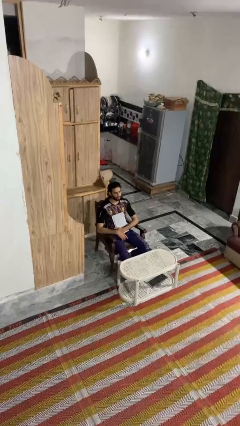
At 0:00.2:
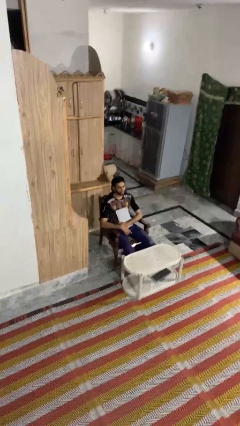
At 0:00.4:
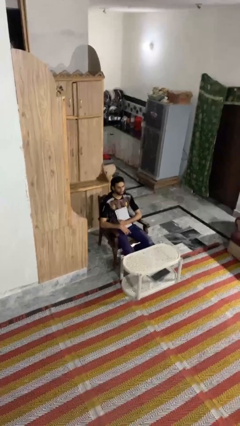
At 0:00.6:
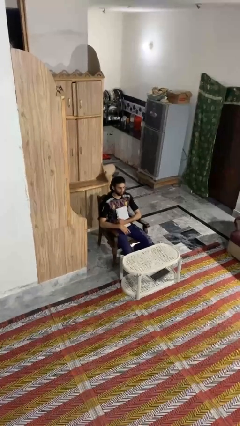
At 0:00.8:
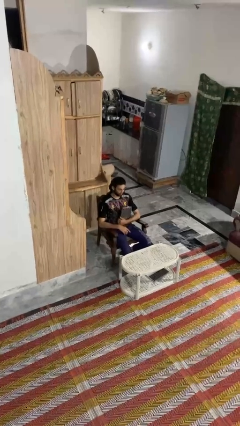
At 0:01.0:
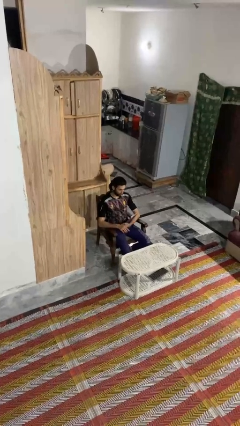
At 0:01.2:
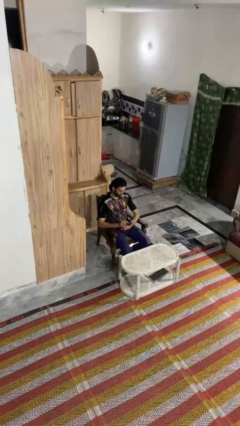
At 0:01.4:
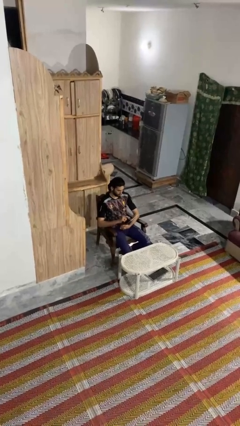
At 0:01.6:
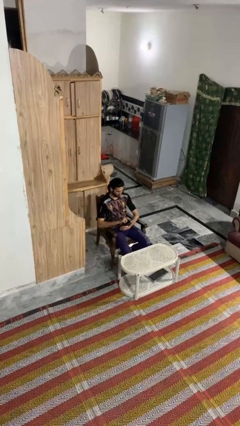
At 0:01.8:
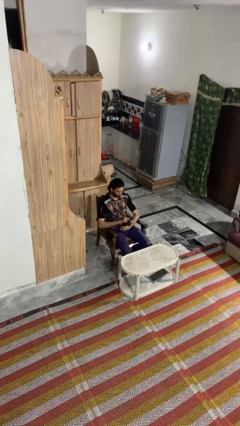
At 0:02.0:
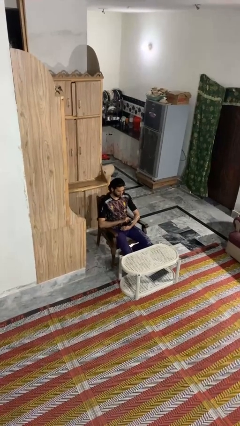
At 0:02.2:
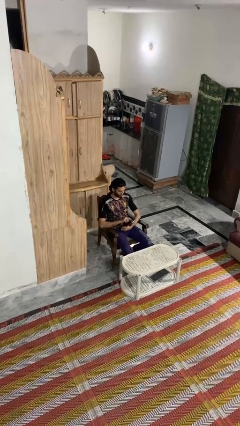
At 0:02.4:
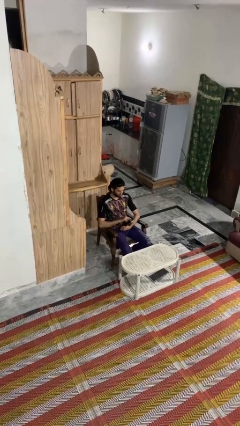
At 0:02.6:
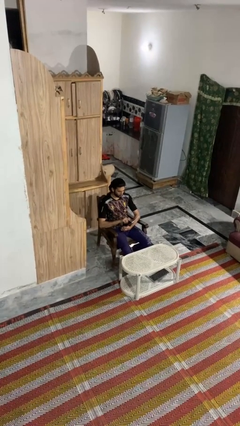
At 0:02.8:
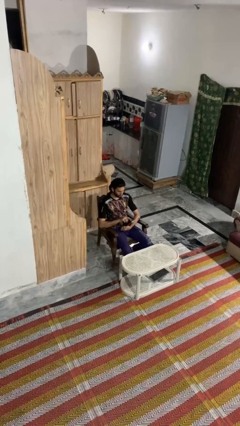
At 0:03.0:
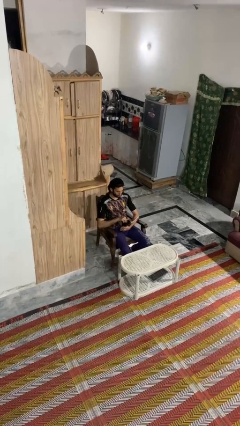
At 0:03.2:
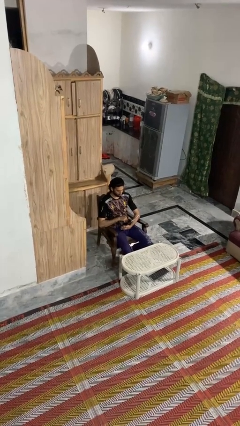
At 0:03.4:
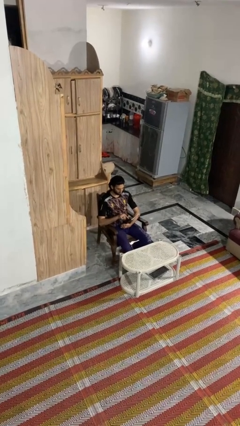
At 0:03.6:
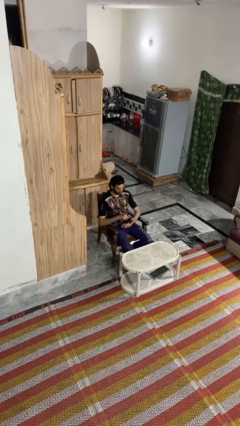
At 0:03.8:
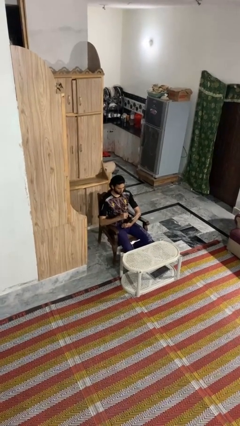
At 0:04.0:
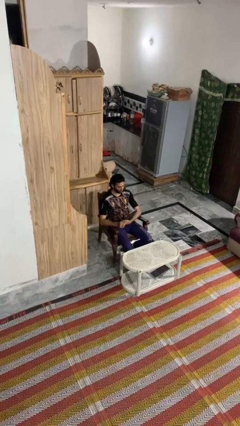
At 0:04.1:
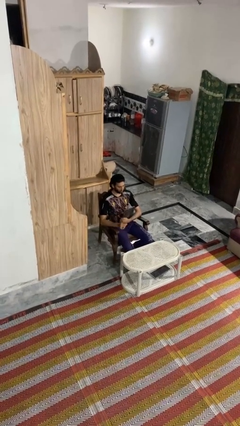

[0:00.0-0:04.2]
person interacts with tablet

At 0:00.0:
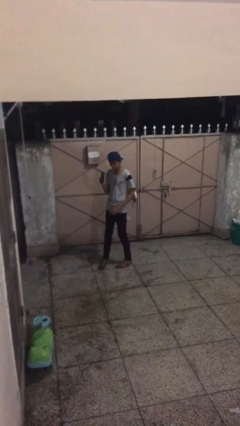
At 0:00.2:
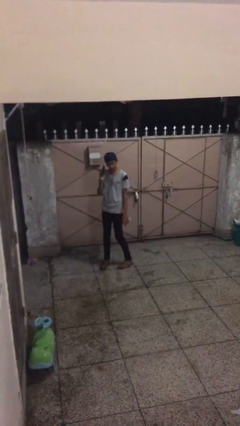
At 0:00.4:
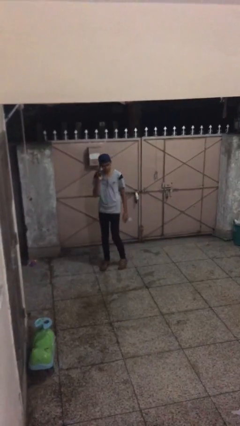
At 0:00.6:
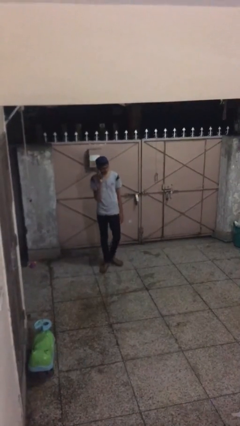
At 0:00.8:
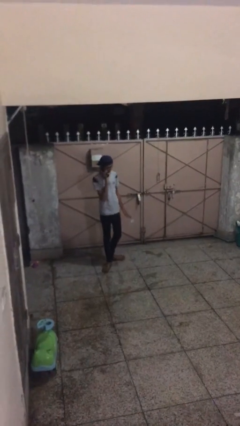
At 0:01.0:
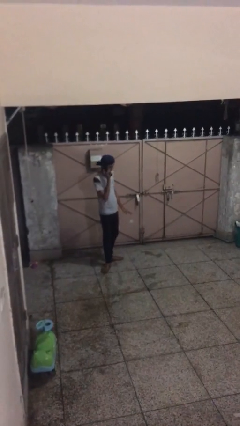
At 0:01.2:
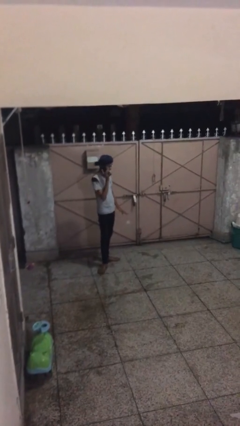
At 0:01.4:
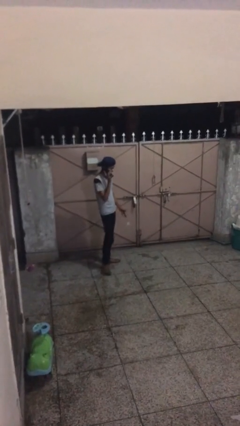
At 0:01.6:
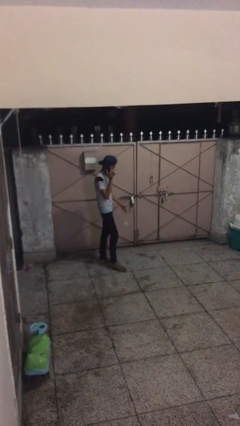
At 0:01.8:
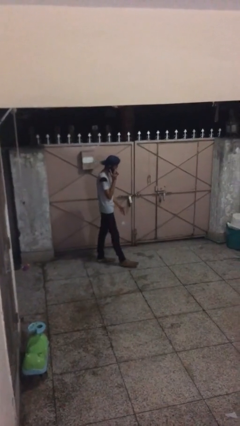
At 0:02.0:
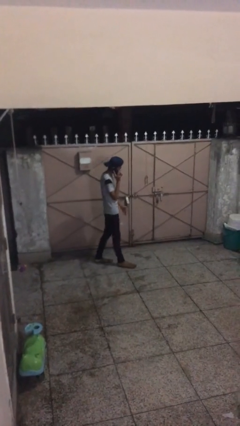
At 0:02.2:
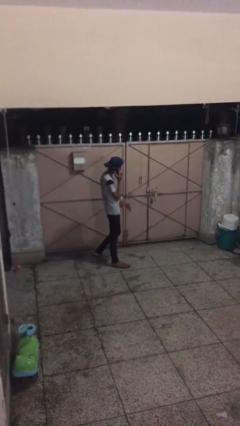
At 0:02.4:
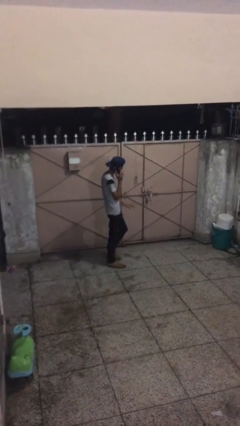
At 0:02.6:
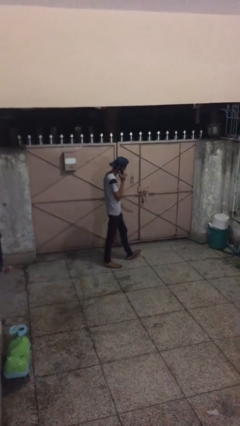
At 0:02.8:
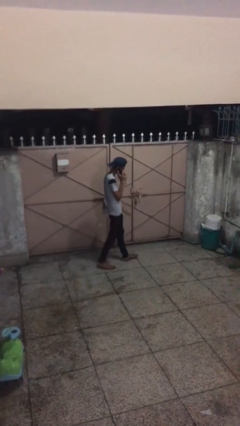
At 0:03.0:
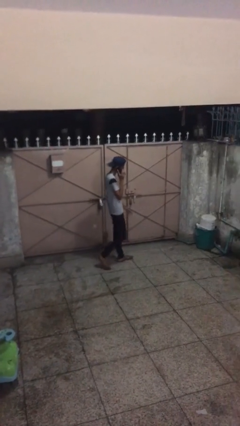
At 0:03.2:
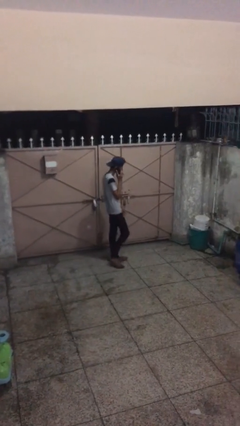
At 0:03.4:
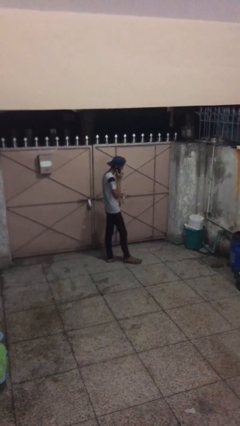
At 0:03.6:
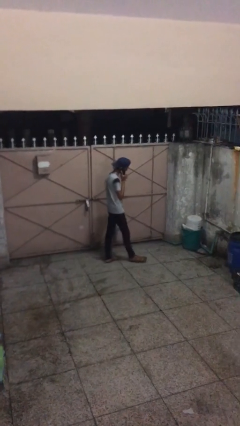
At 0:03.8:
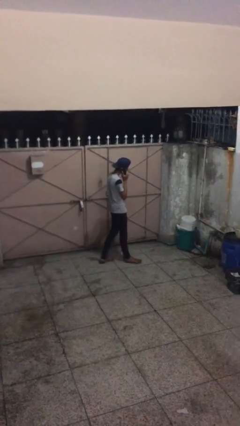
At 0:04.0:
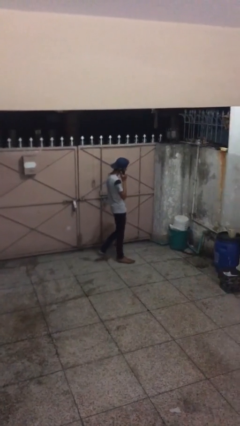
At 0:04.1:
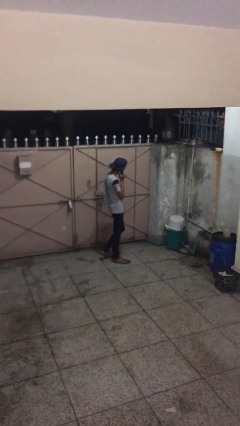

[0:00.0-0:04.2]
person talks on phone

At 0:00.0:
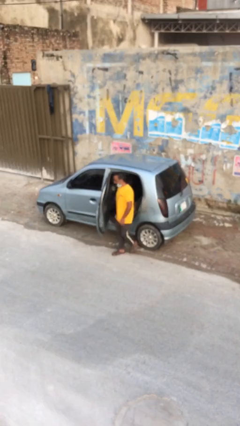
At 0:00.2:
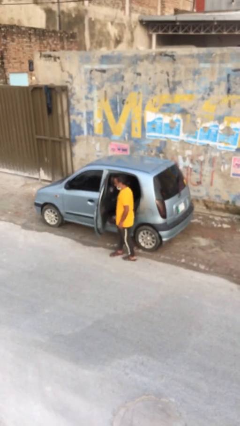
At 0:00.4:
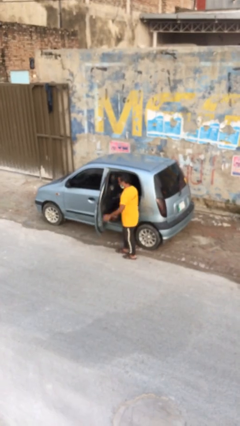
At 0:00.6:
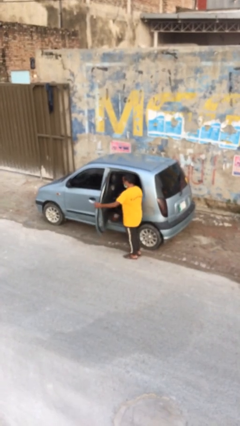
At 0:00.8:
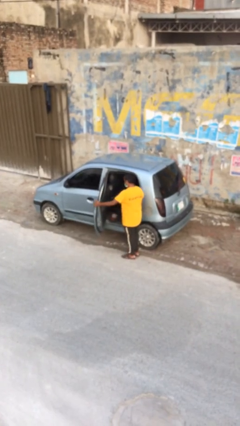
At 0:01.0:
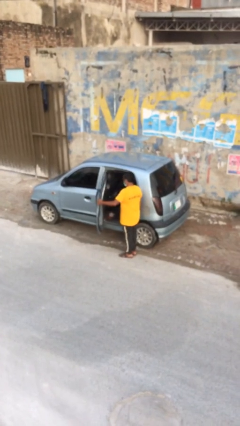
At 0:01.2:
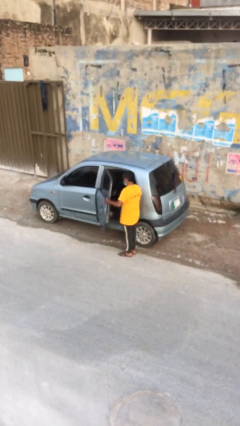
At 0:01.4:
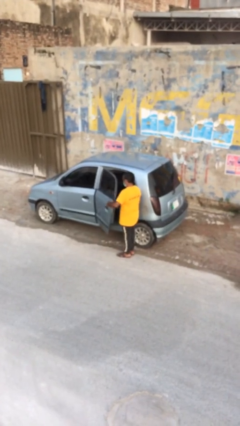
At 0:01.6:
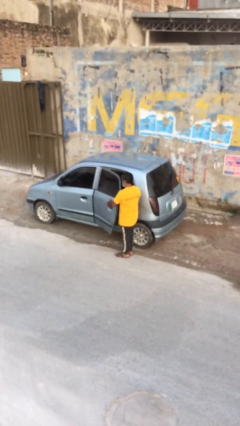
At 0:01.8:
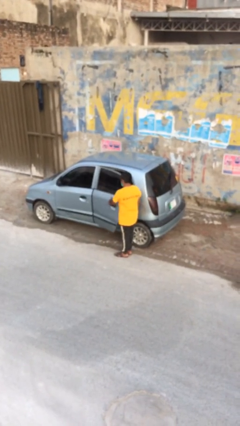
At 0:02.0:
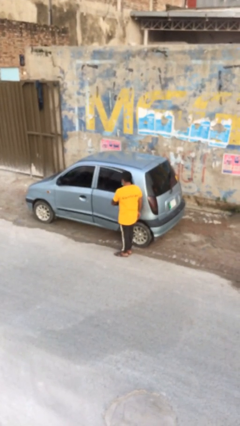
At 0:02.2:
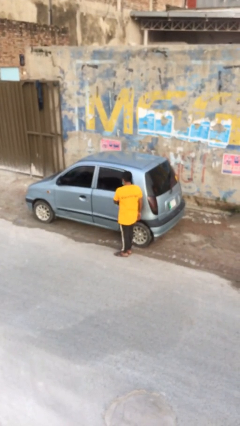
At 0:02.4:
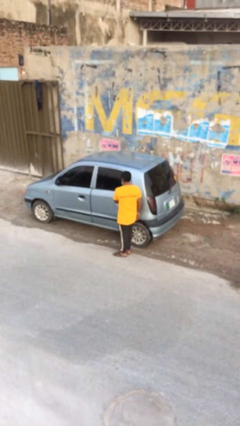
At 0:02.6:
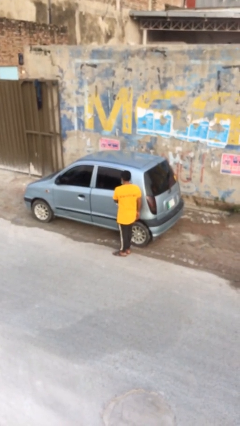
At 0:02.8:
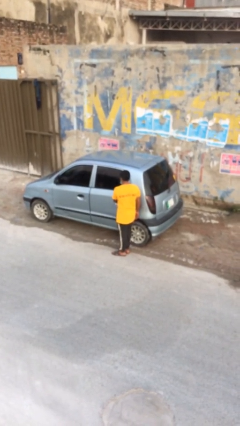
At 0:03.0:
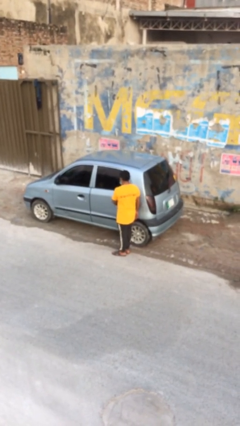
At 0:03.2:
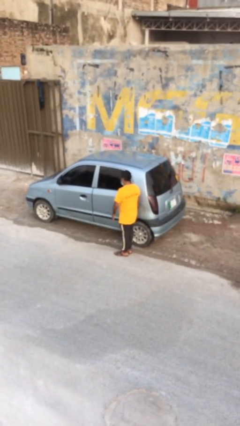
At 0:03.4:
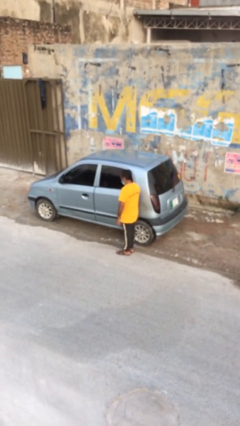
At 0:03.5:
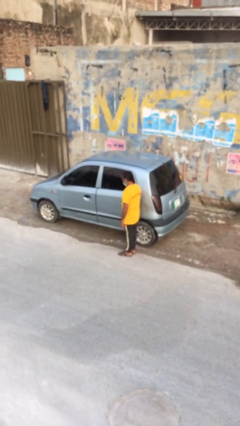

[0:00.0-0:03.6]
person closes car door

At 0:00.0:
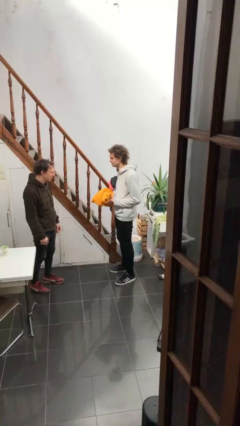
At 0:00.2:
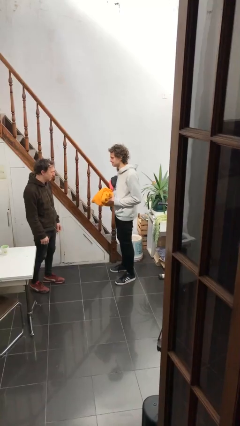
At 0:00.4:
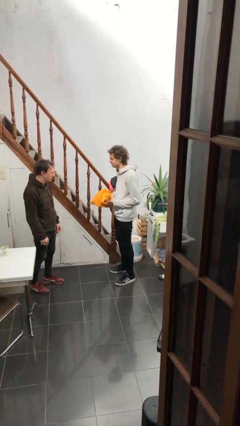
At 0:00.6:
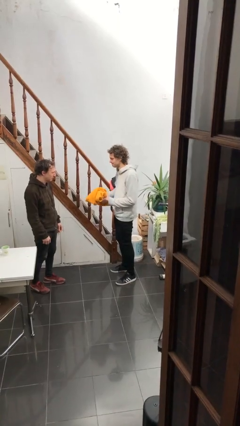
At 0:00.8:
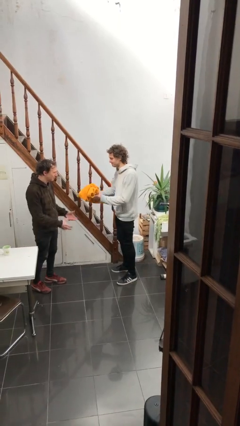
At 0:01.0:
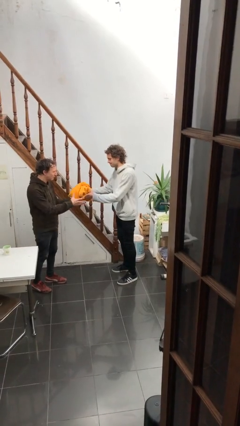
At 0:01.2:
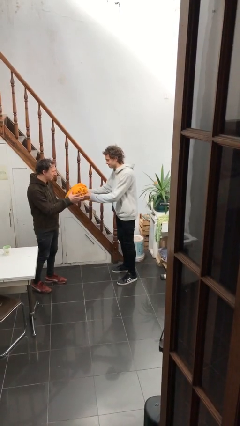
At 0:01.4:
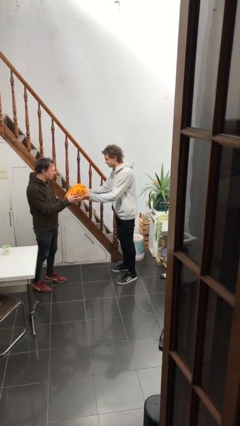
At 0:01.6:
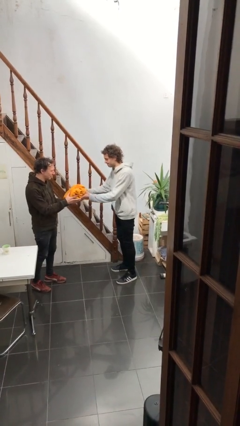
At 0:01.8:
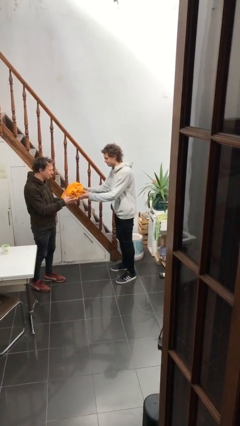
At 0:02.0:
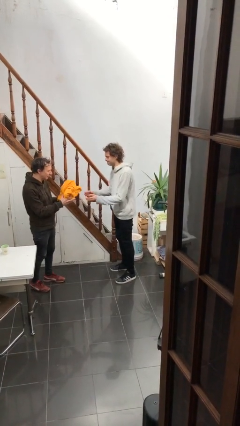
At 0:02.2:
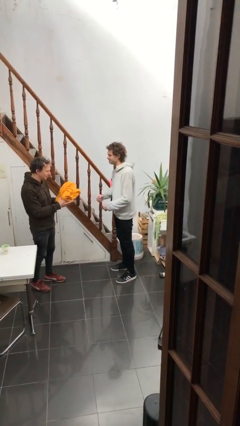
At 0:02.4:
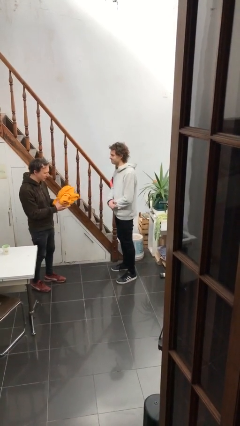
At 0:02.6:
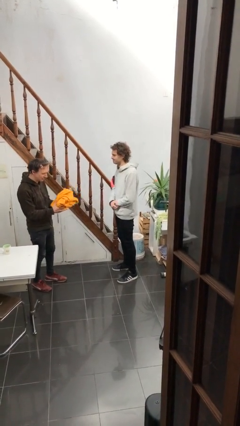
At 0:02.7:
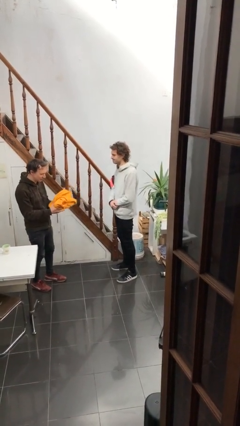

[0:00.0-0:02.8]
person transfers object to person

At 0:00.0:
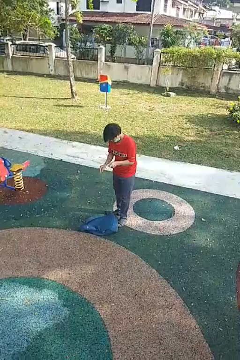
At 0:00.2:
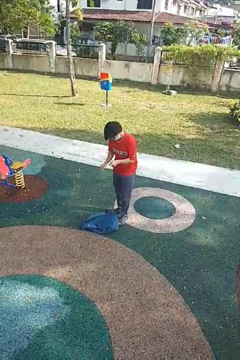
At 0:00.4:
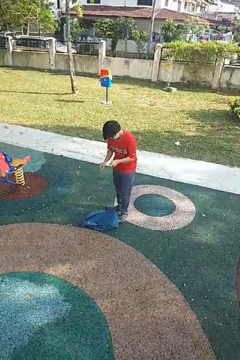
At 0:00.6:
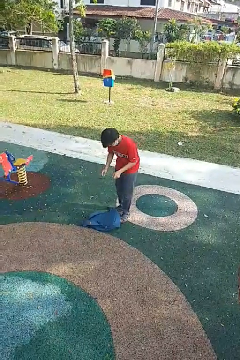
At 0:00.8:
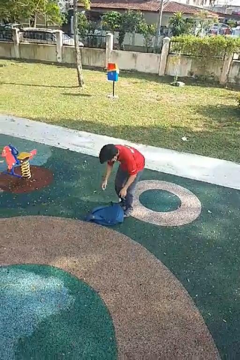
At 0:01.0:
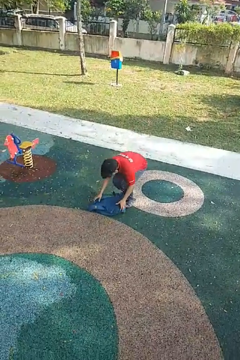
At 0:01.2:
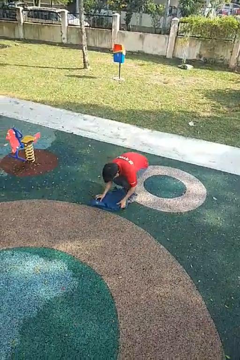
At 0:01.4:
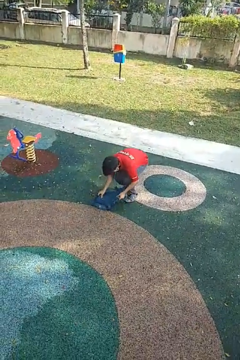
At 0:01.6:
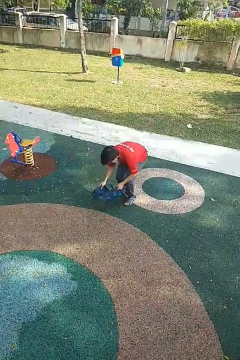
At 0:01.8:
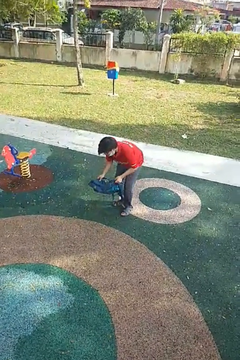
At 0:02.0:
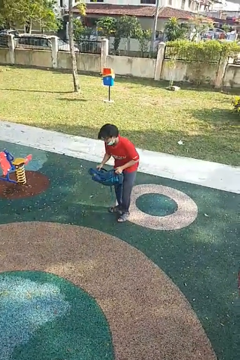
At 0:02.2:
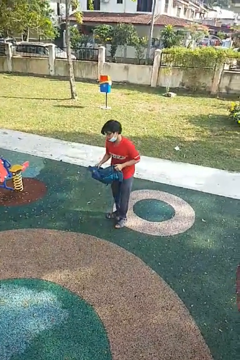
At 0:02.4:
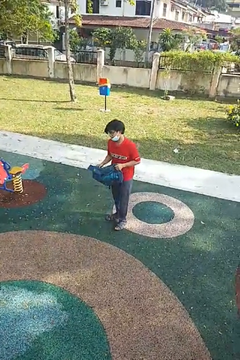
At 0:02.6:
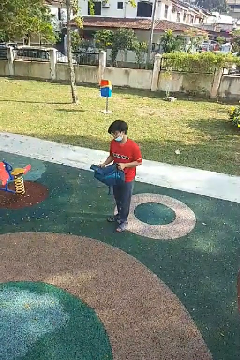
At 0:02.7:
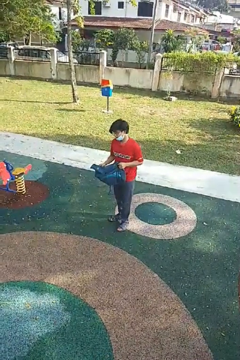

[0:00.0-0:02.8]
person picks up object from floor
